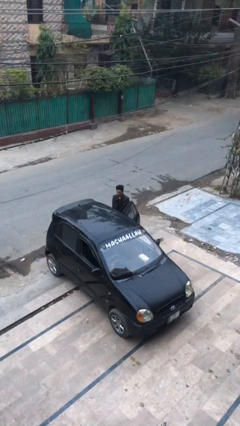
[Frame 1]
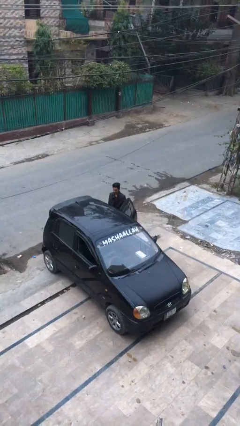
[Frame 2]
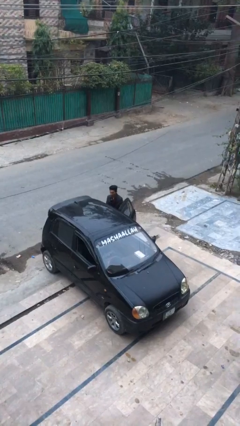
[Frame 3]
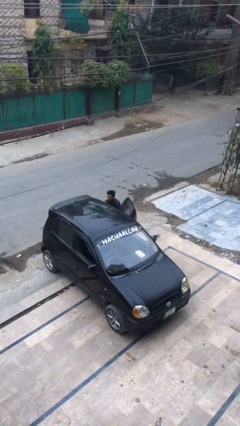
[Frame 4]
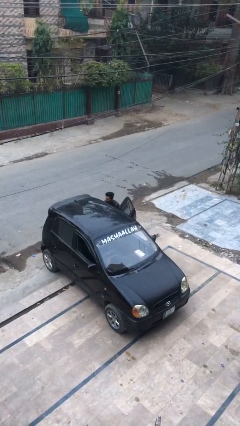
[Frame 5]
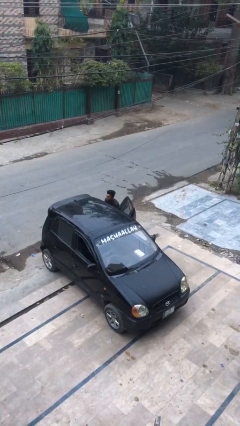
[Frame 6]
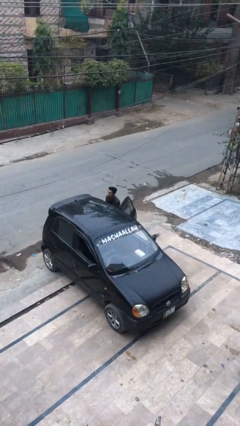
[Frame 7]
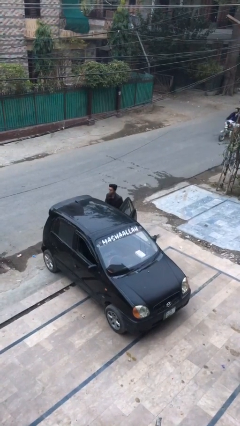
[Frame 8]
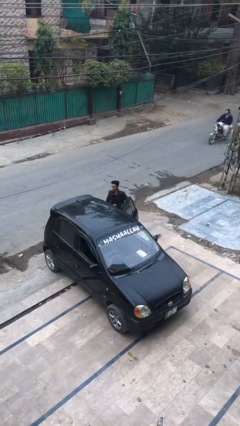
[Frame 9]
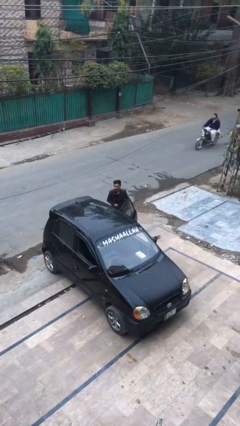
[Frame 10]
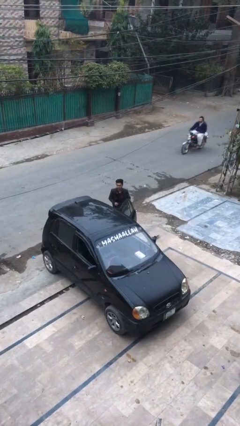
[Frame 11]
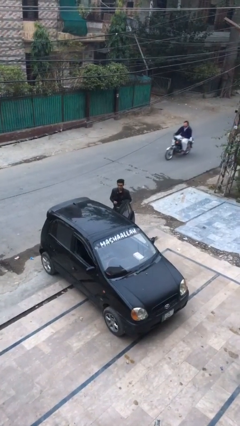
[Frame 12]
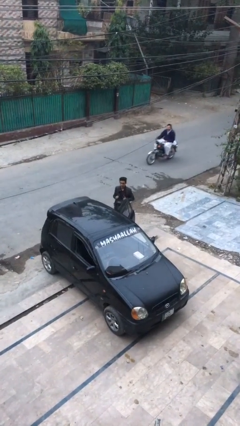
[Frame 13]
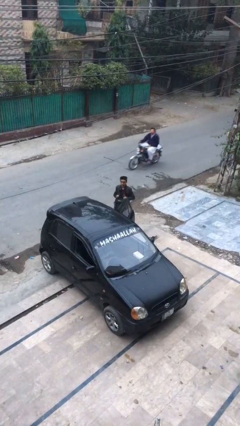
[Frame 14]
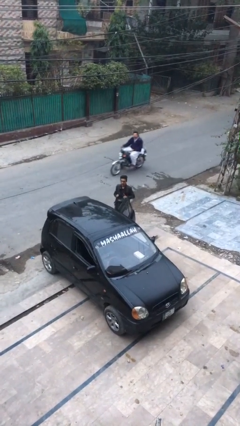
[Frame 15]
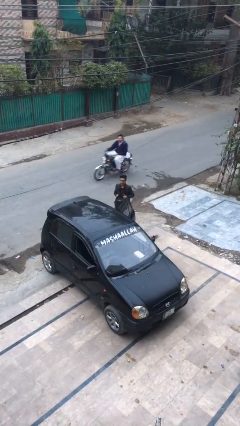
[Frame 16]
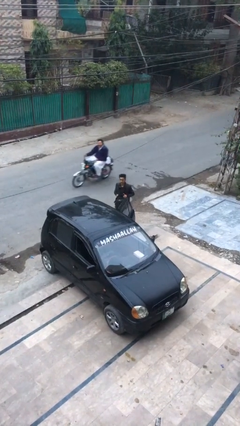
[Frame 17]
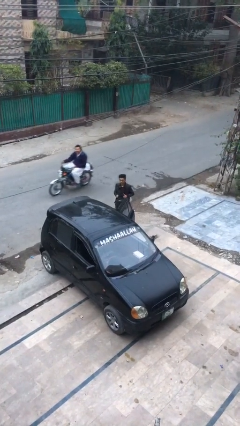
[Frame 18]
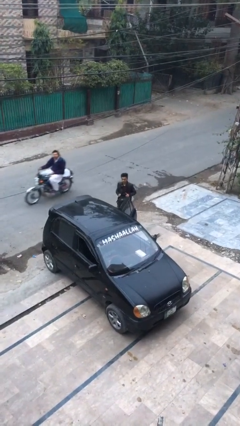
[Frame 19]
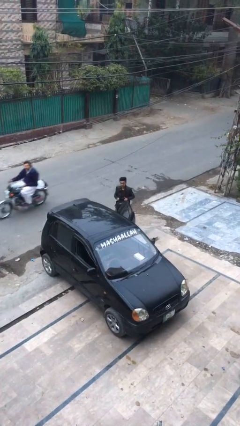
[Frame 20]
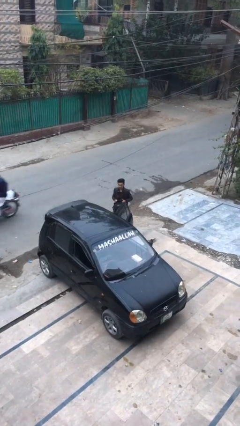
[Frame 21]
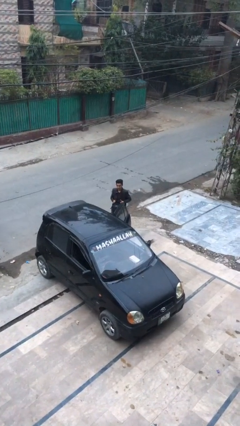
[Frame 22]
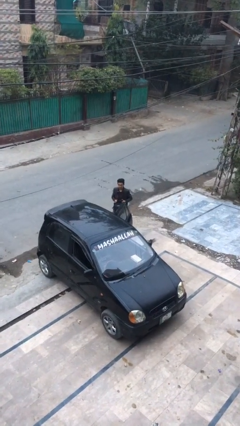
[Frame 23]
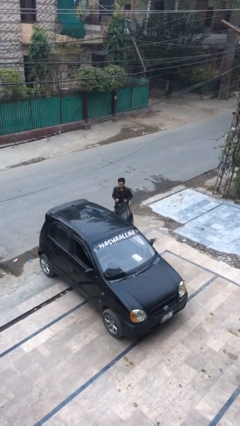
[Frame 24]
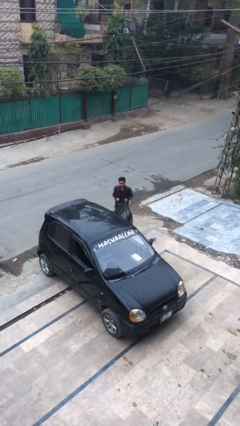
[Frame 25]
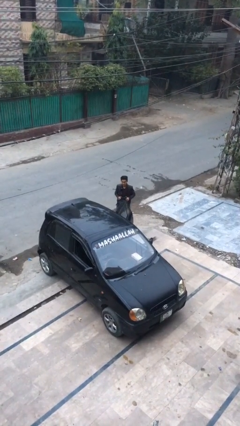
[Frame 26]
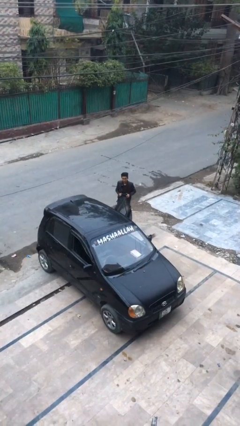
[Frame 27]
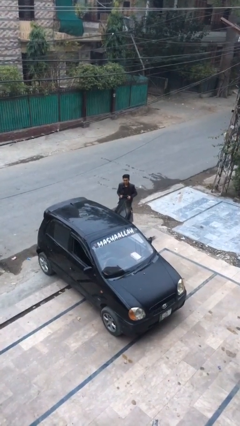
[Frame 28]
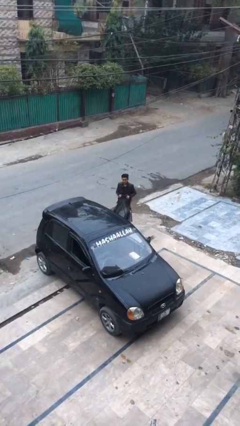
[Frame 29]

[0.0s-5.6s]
person unloads car

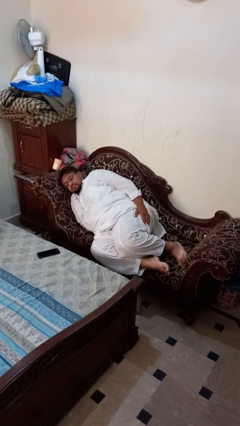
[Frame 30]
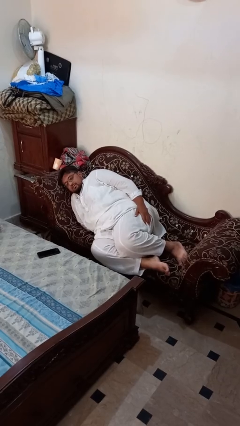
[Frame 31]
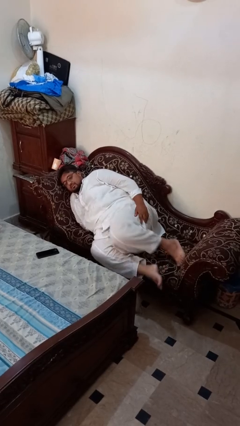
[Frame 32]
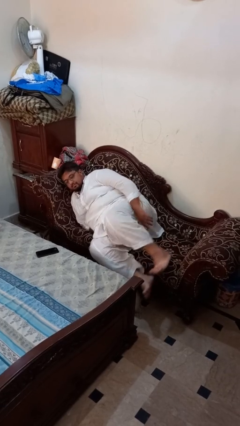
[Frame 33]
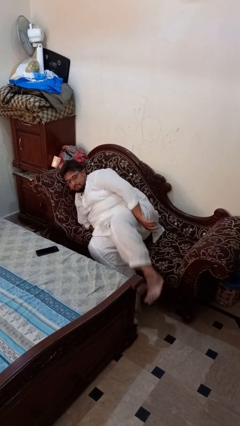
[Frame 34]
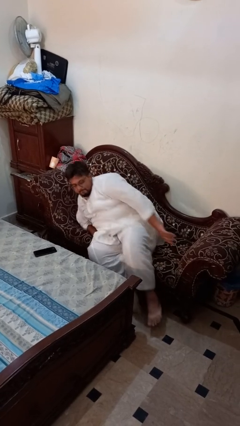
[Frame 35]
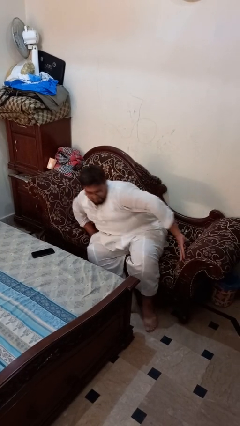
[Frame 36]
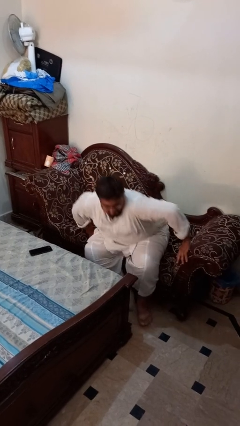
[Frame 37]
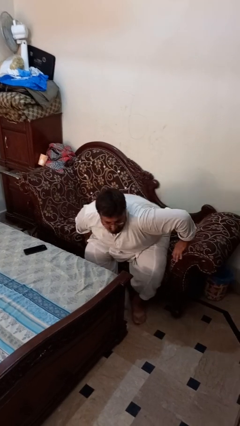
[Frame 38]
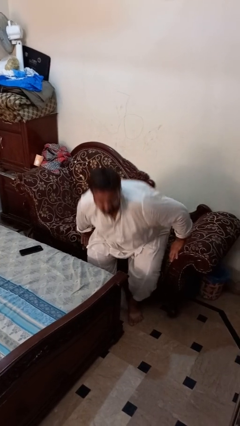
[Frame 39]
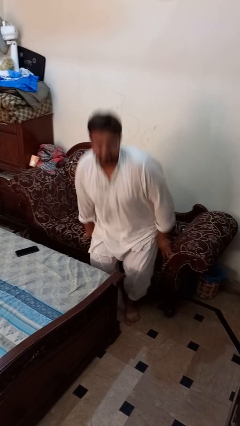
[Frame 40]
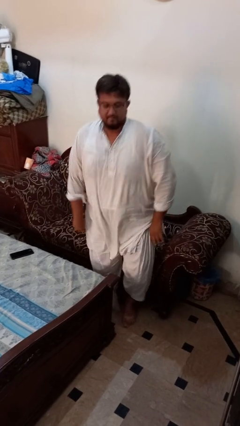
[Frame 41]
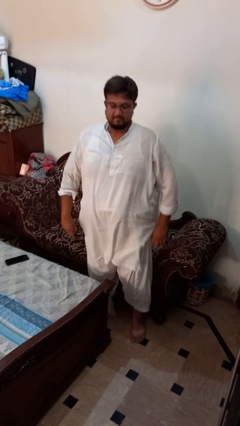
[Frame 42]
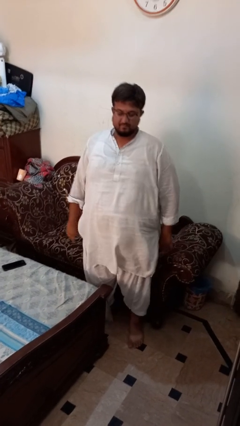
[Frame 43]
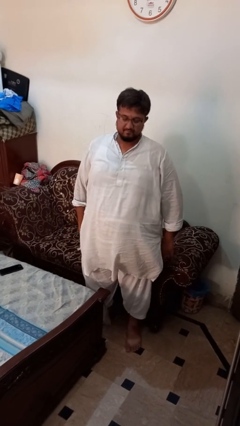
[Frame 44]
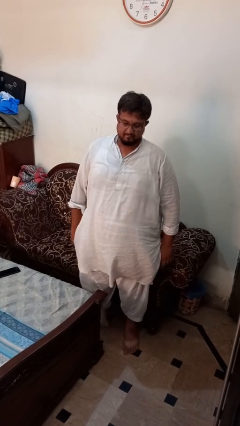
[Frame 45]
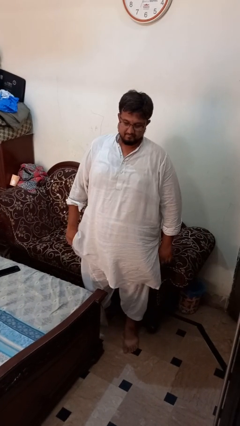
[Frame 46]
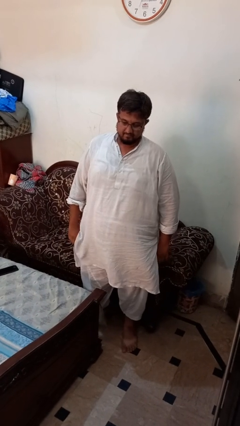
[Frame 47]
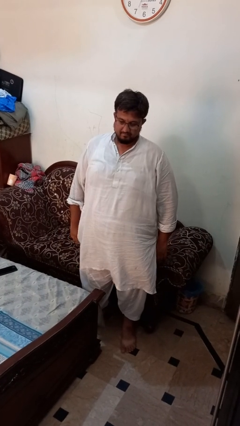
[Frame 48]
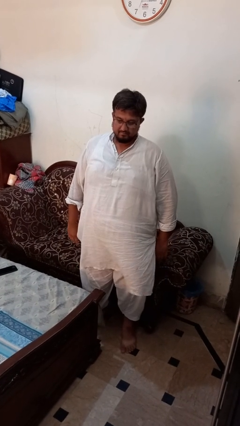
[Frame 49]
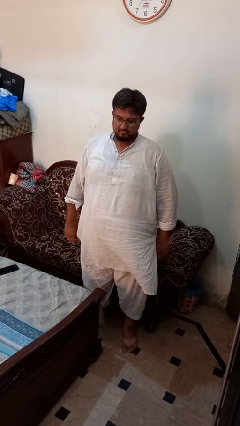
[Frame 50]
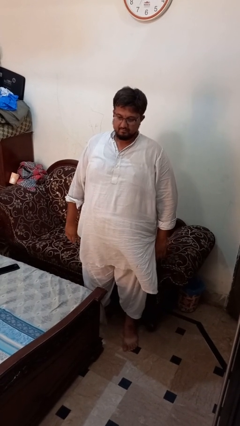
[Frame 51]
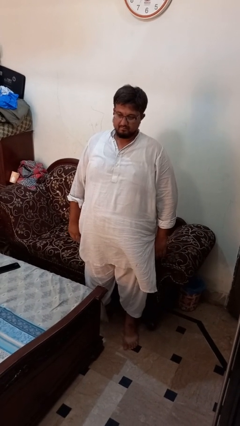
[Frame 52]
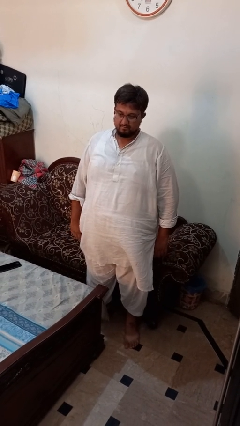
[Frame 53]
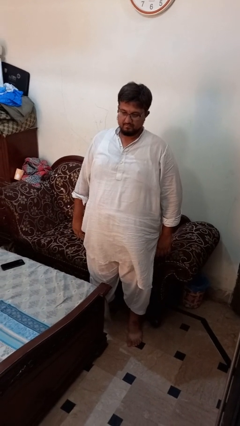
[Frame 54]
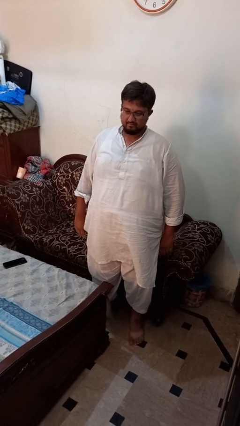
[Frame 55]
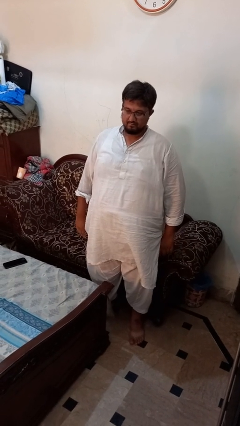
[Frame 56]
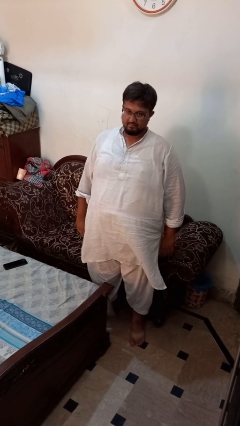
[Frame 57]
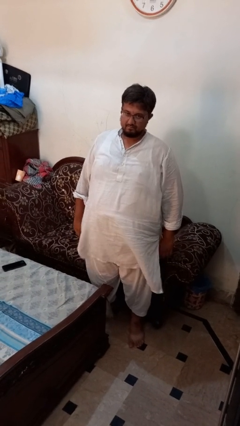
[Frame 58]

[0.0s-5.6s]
person stands up

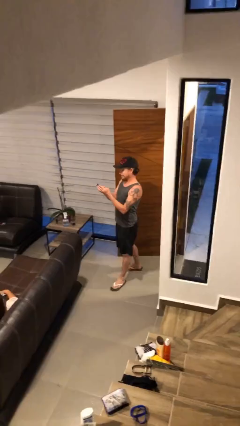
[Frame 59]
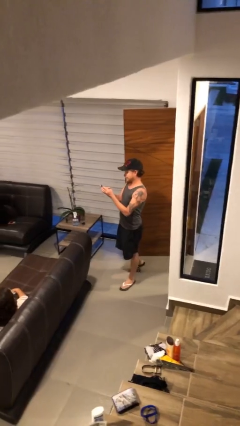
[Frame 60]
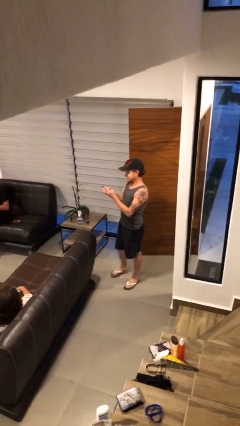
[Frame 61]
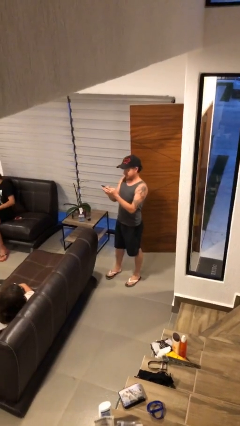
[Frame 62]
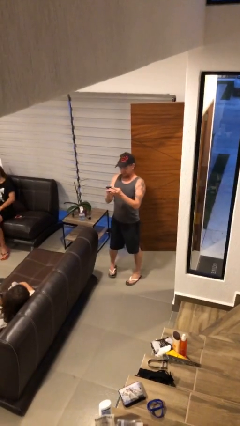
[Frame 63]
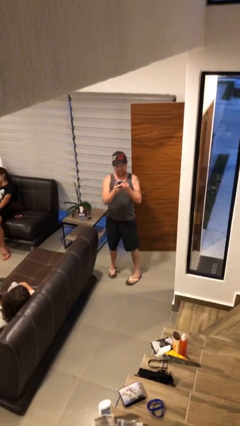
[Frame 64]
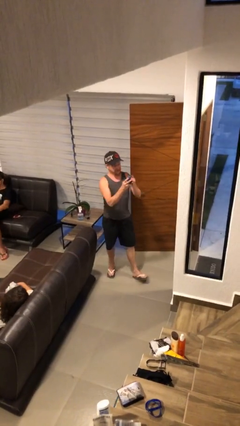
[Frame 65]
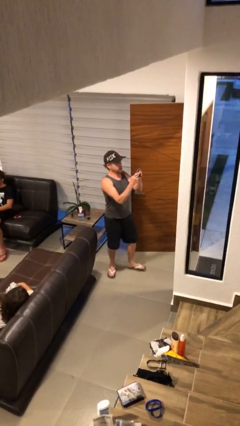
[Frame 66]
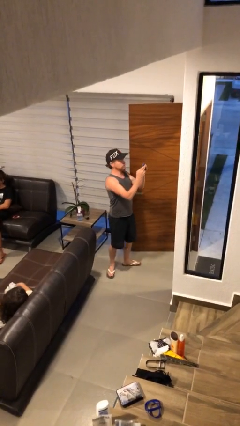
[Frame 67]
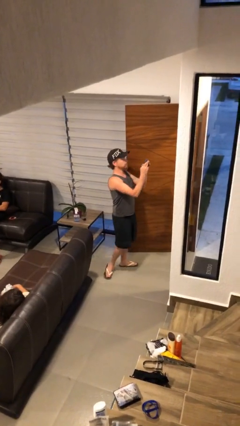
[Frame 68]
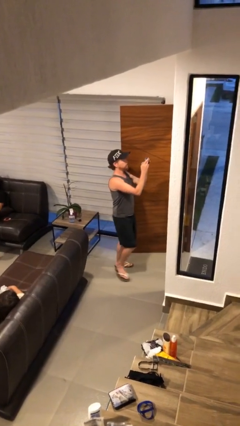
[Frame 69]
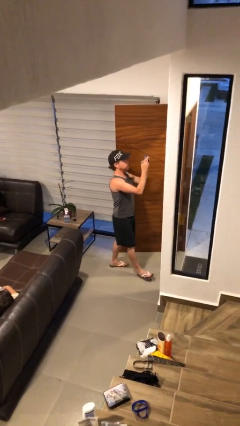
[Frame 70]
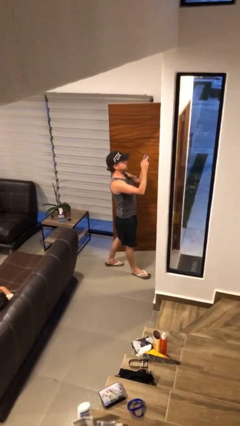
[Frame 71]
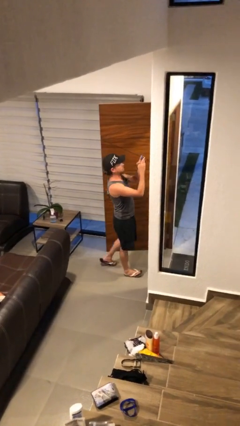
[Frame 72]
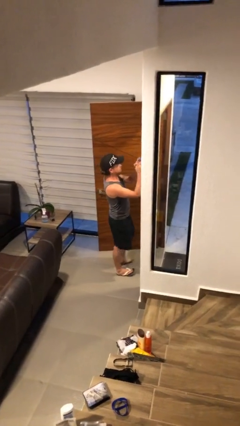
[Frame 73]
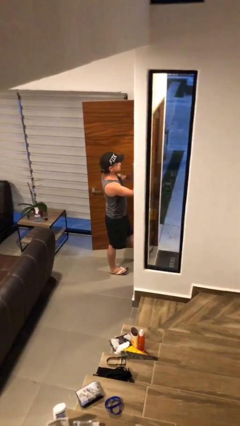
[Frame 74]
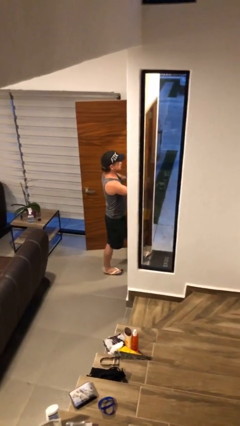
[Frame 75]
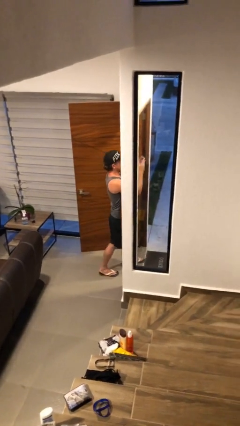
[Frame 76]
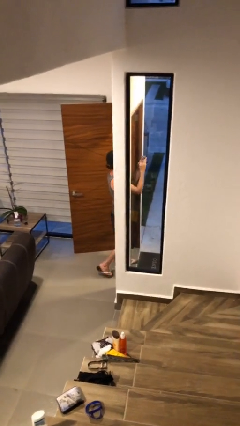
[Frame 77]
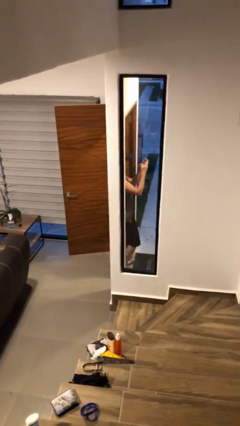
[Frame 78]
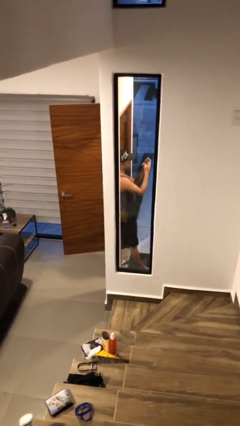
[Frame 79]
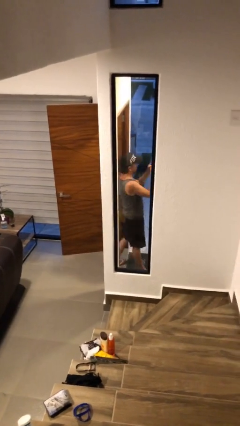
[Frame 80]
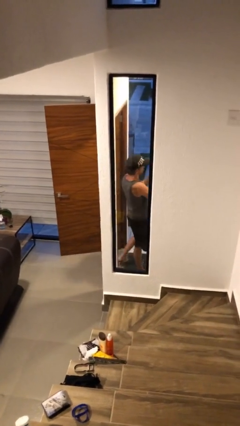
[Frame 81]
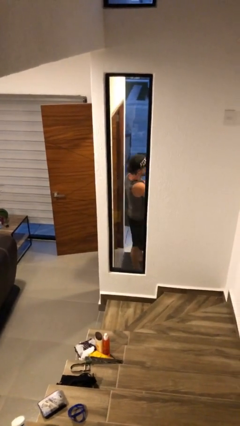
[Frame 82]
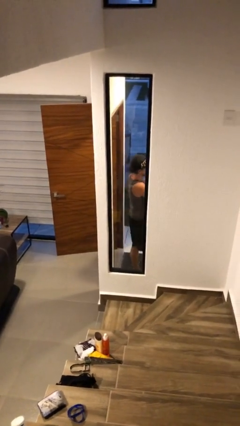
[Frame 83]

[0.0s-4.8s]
person exits scene through structure

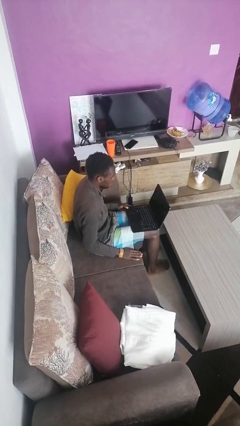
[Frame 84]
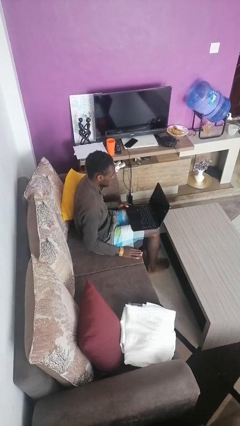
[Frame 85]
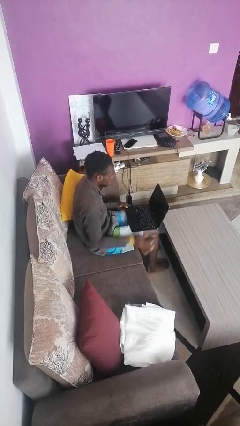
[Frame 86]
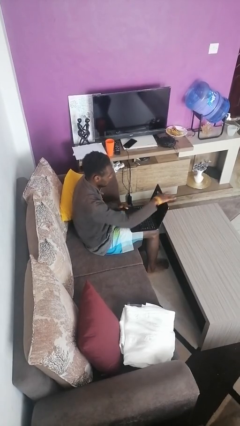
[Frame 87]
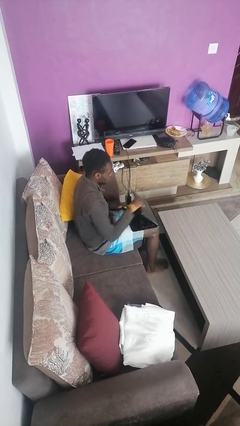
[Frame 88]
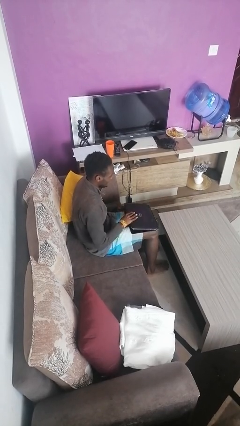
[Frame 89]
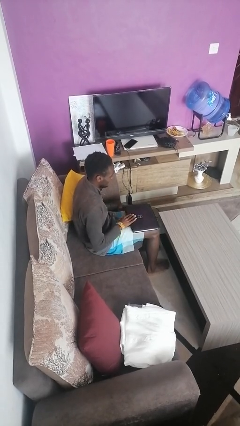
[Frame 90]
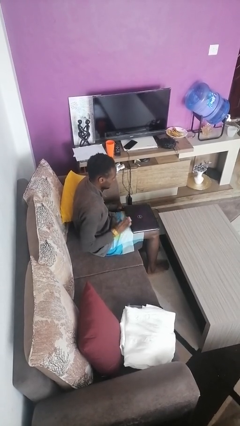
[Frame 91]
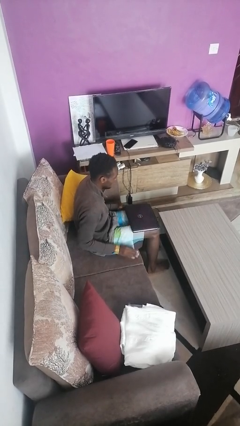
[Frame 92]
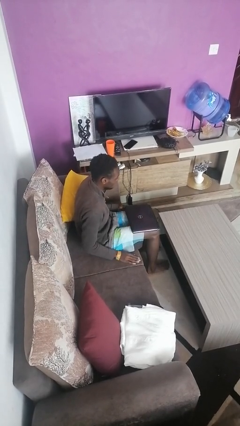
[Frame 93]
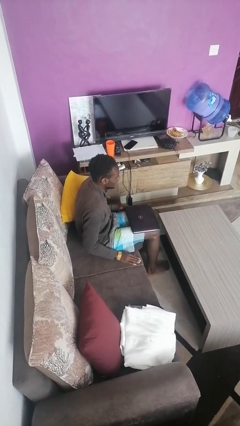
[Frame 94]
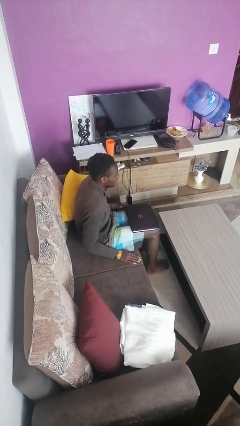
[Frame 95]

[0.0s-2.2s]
person closes laptop
